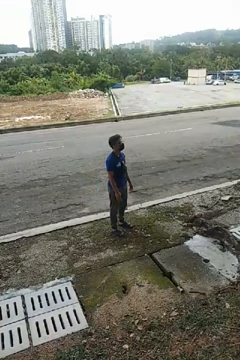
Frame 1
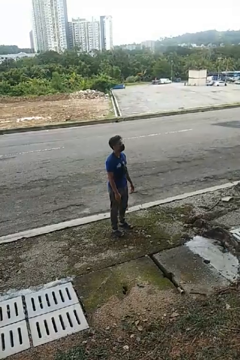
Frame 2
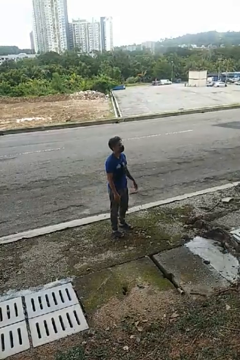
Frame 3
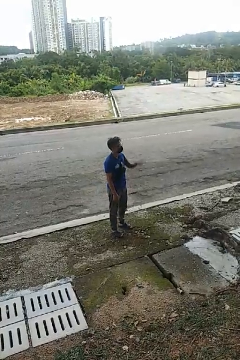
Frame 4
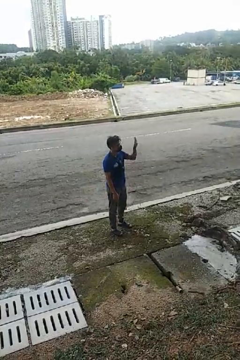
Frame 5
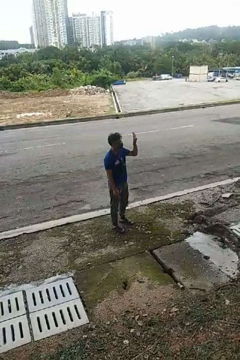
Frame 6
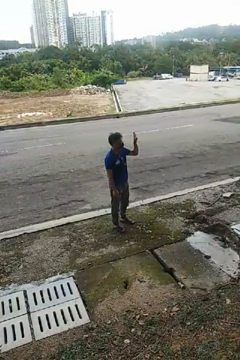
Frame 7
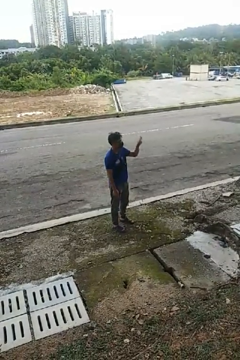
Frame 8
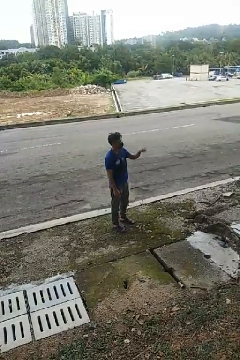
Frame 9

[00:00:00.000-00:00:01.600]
person gestures number four

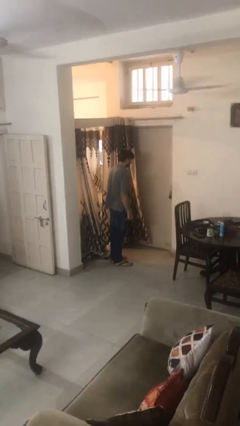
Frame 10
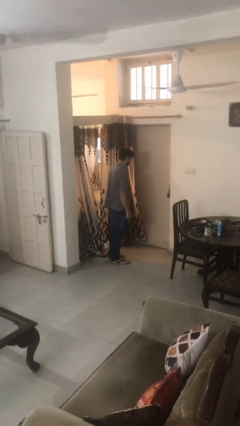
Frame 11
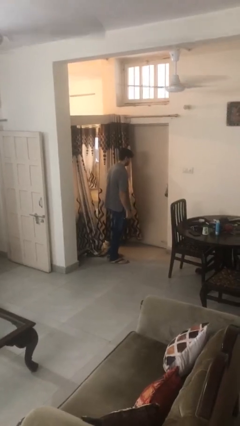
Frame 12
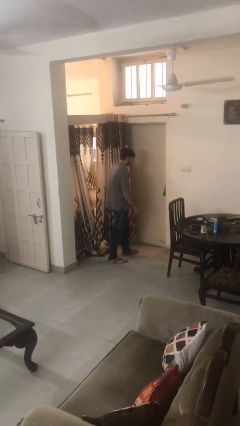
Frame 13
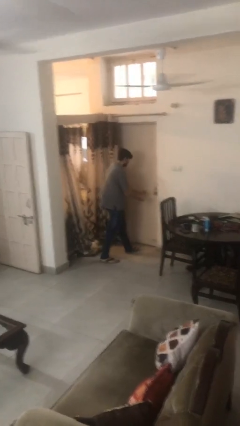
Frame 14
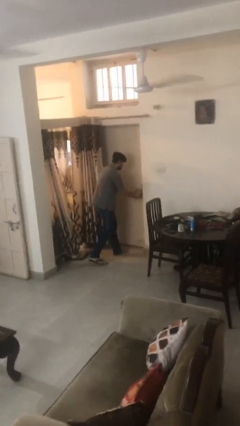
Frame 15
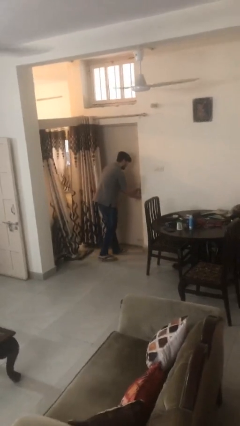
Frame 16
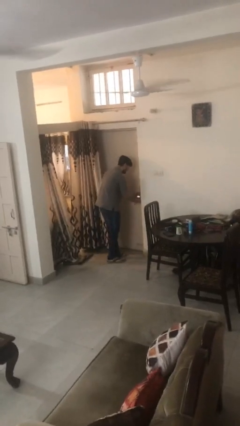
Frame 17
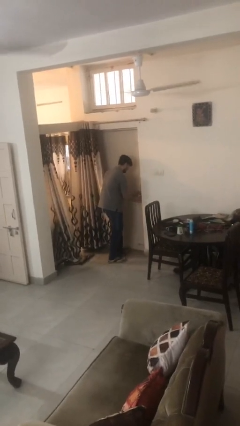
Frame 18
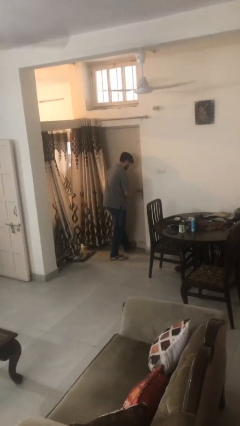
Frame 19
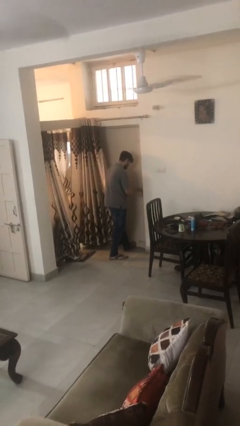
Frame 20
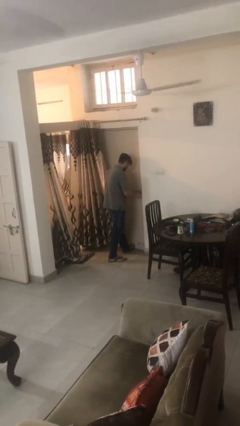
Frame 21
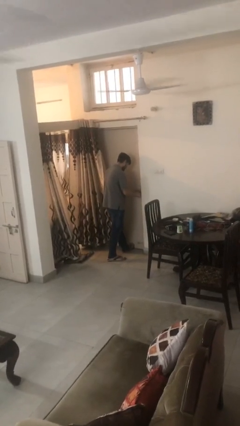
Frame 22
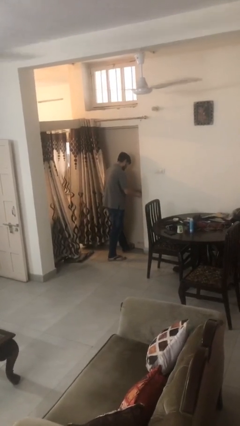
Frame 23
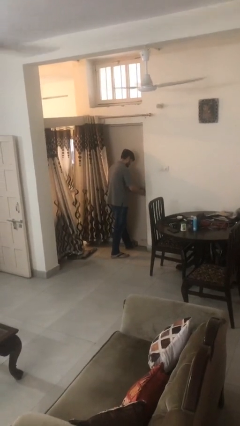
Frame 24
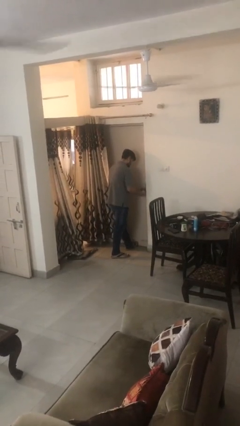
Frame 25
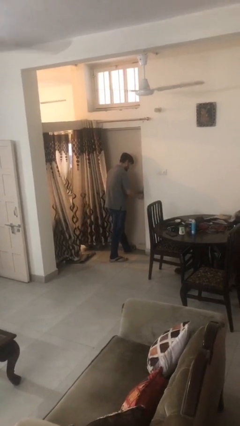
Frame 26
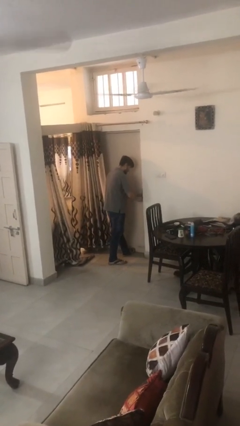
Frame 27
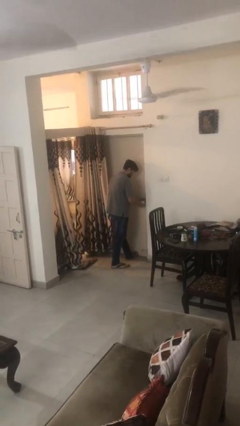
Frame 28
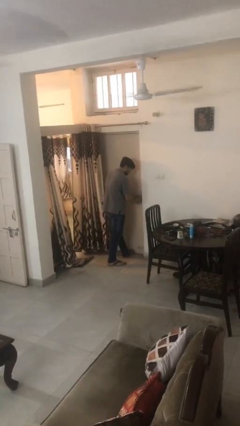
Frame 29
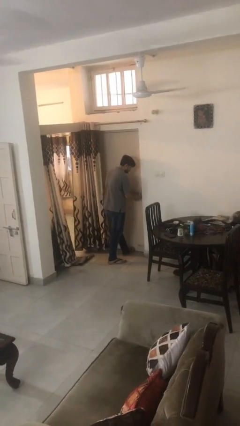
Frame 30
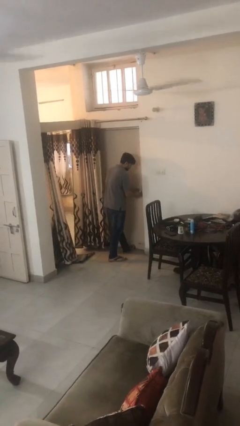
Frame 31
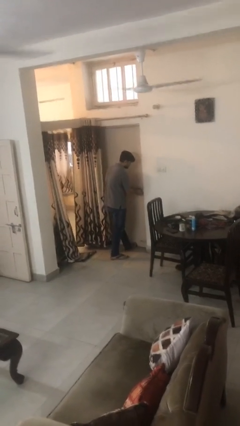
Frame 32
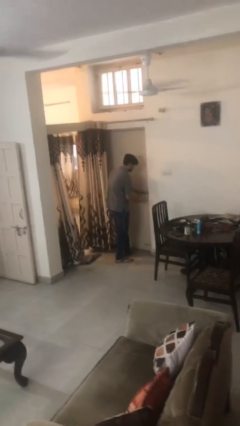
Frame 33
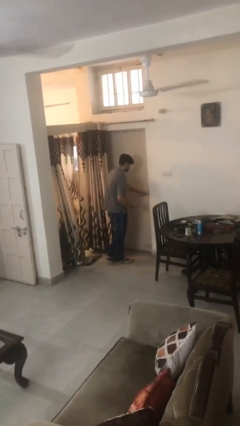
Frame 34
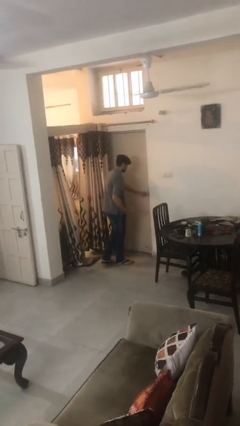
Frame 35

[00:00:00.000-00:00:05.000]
person unlocks door with keys

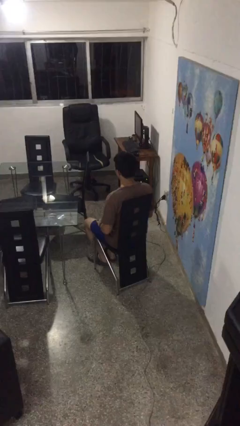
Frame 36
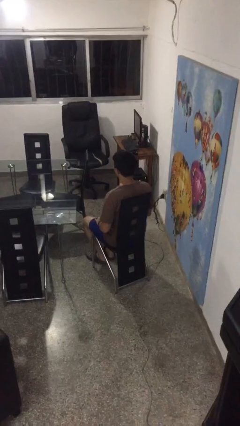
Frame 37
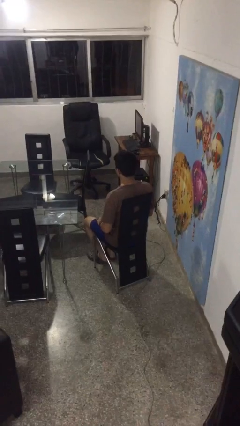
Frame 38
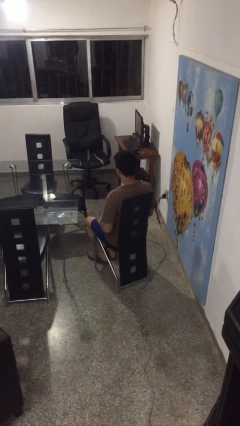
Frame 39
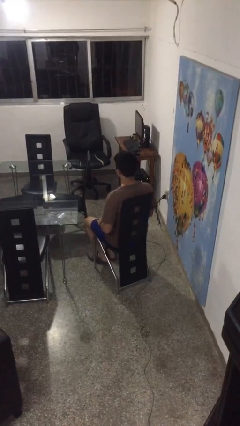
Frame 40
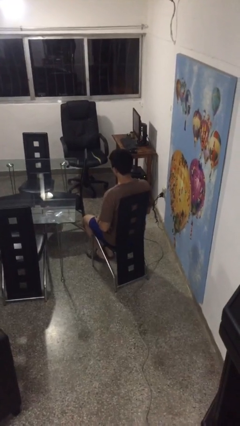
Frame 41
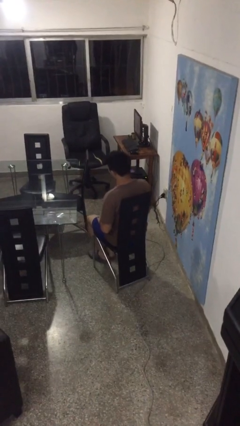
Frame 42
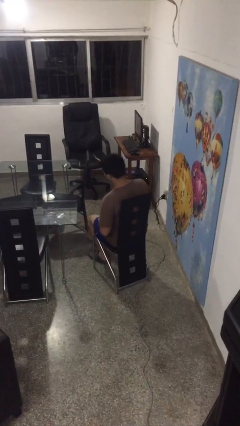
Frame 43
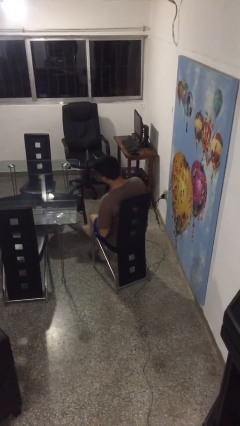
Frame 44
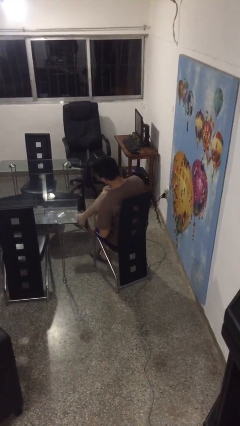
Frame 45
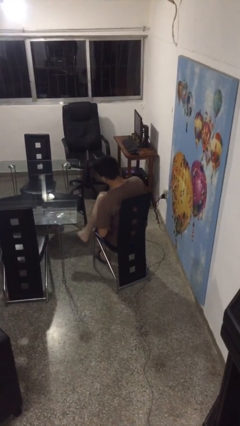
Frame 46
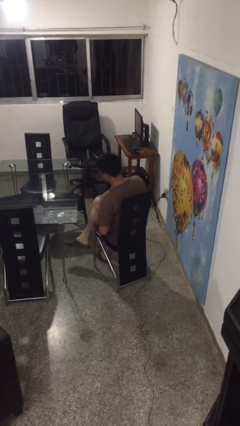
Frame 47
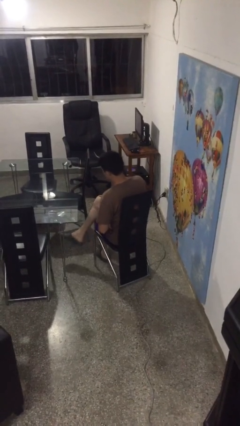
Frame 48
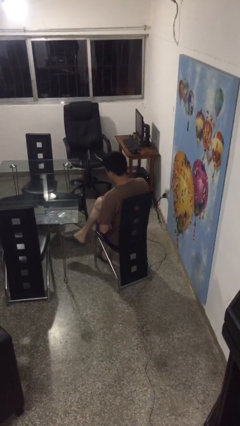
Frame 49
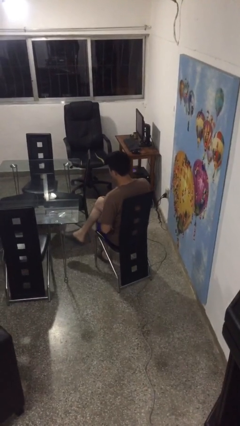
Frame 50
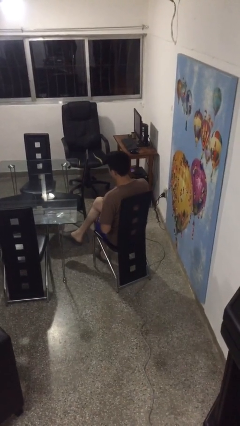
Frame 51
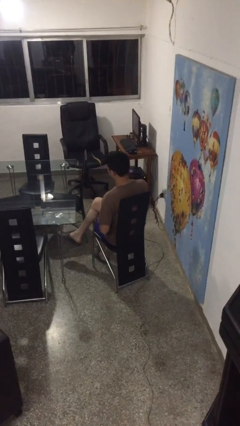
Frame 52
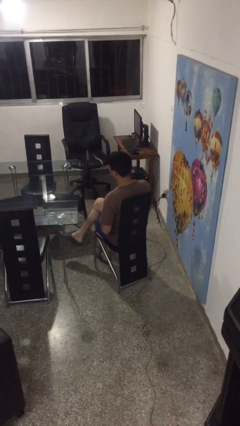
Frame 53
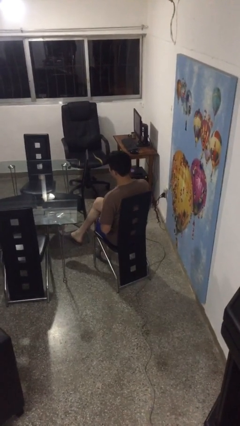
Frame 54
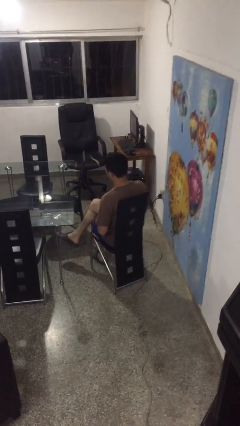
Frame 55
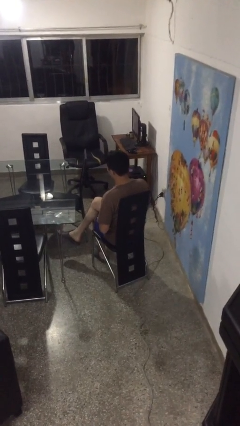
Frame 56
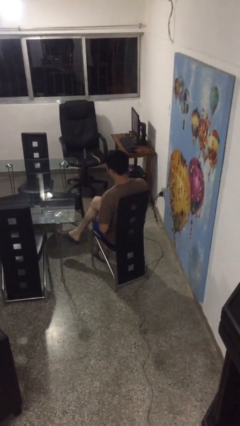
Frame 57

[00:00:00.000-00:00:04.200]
person crosses legs

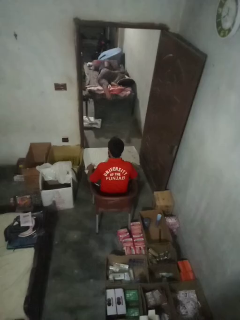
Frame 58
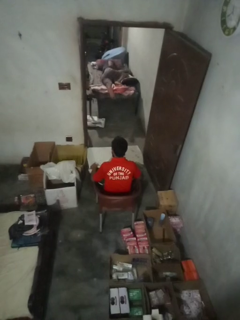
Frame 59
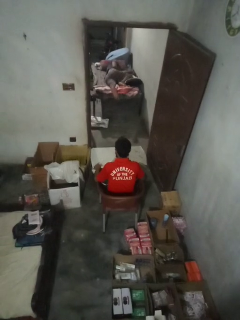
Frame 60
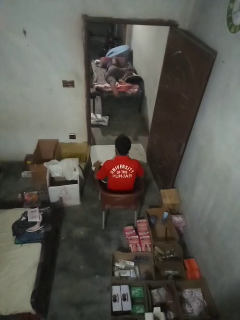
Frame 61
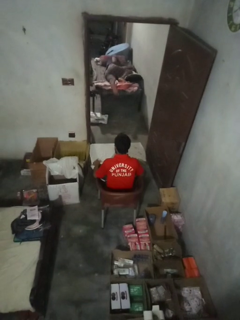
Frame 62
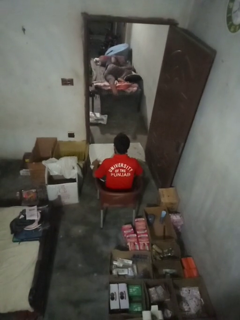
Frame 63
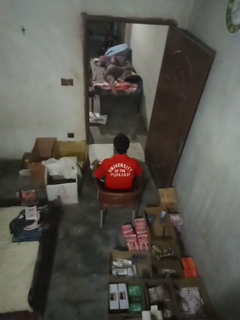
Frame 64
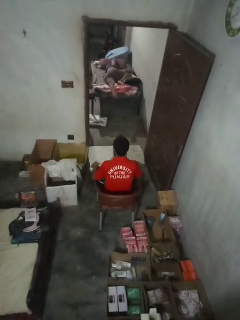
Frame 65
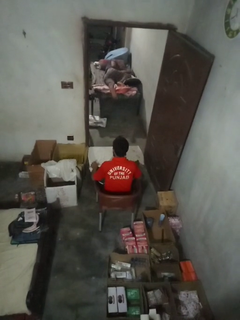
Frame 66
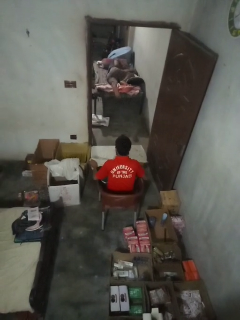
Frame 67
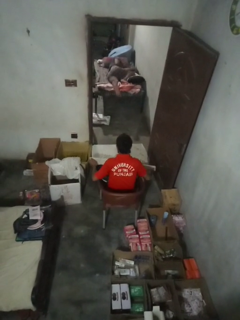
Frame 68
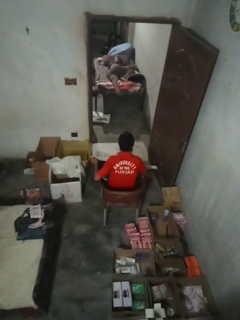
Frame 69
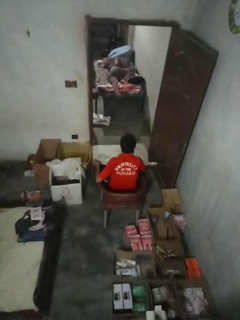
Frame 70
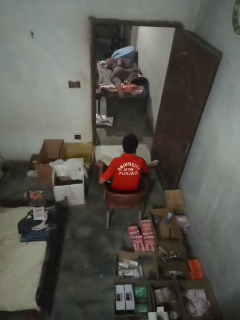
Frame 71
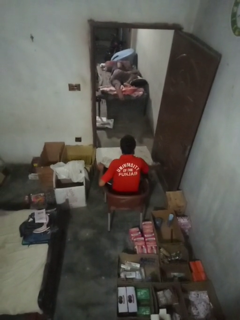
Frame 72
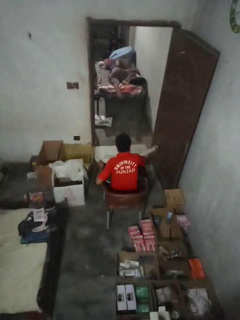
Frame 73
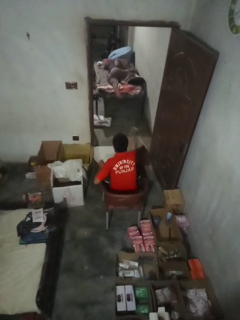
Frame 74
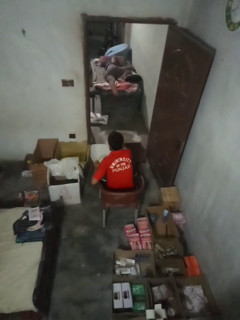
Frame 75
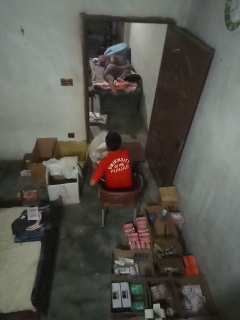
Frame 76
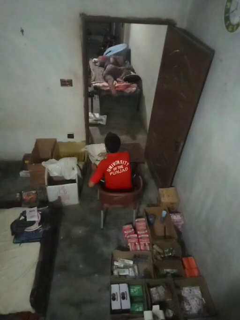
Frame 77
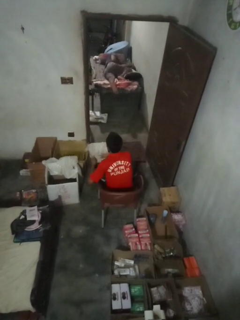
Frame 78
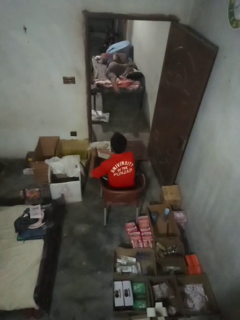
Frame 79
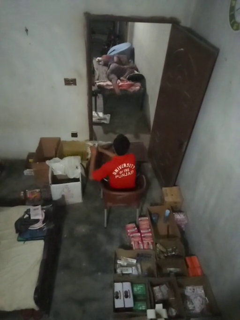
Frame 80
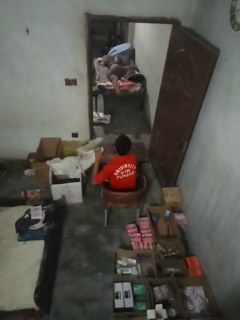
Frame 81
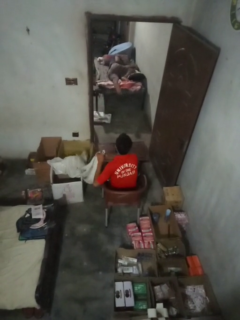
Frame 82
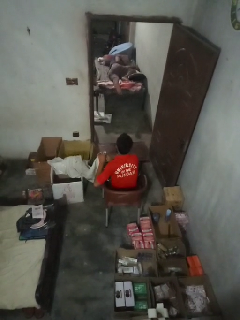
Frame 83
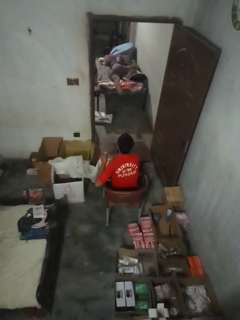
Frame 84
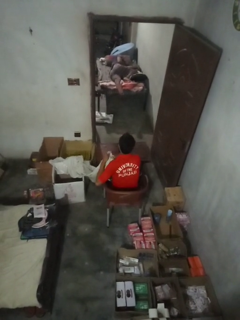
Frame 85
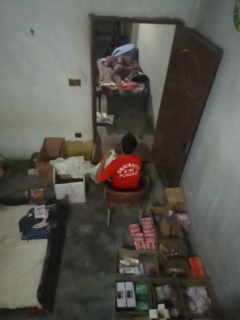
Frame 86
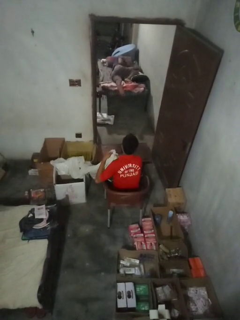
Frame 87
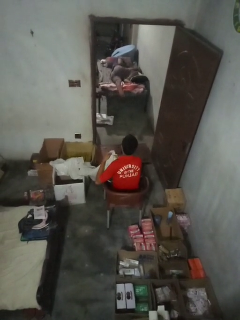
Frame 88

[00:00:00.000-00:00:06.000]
person folds tablecloth

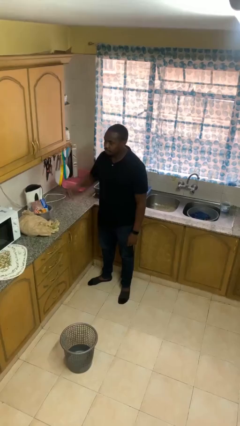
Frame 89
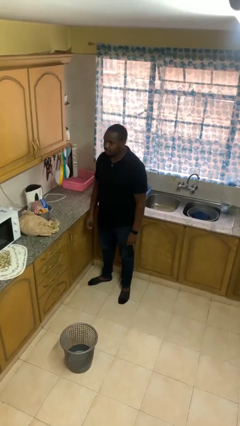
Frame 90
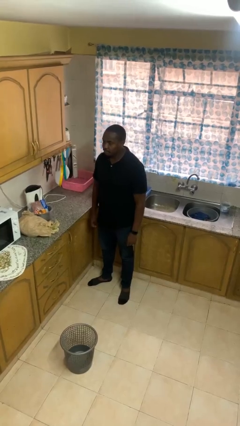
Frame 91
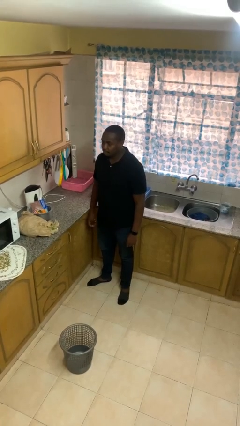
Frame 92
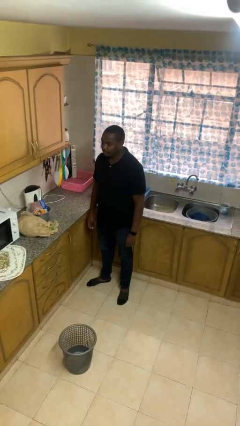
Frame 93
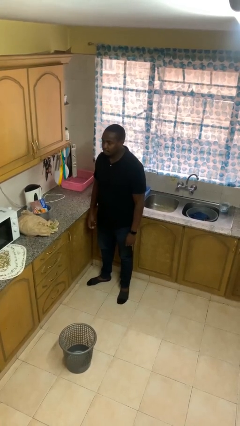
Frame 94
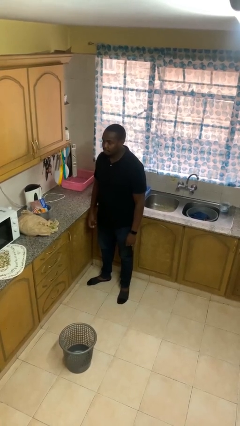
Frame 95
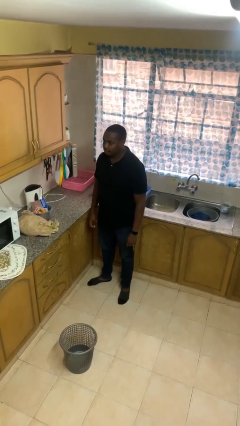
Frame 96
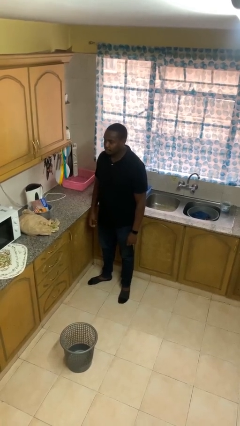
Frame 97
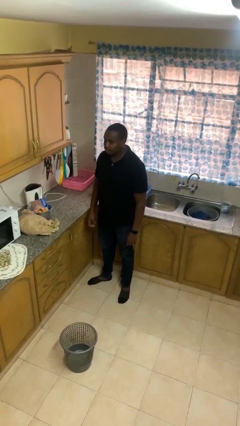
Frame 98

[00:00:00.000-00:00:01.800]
person closes cabinet

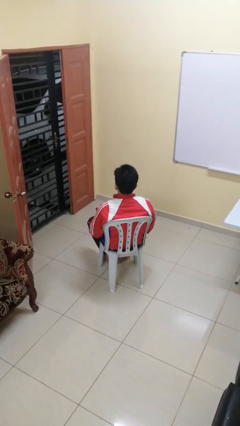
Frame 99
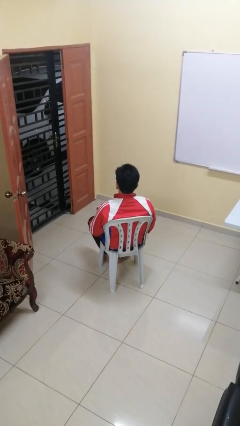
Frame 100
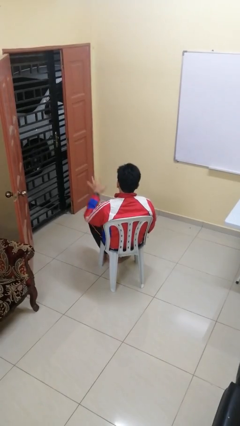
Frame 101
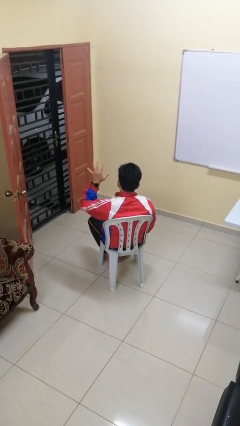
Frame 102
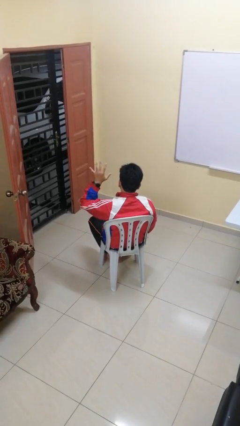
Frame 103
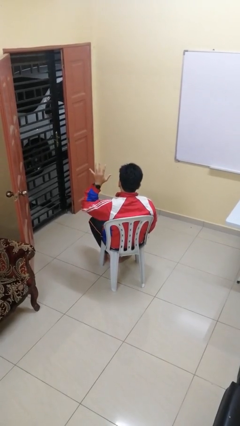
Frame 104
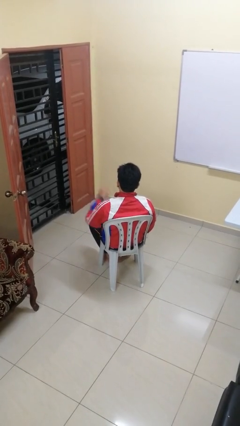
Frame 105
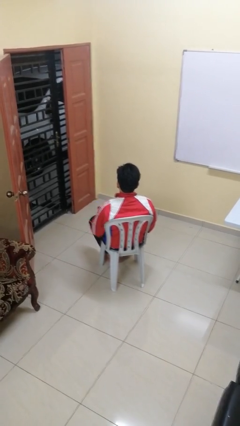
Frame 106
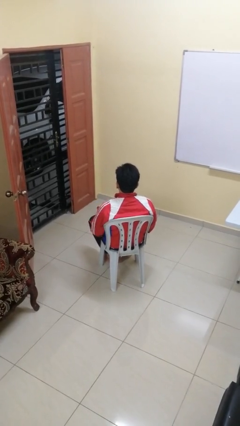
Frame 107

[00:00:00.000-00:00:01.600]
person gestures number five
